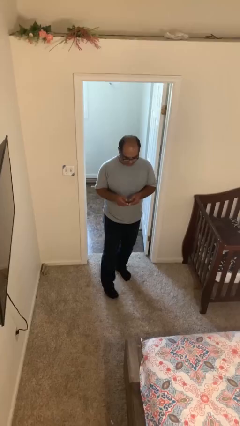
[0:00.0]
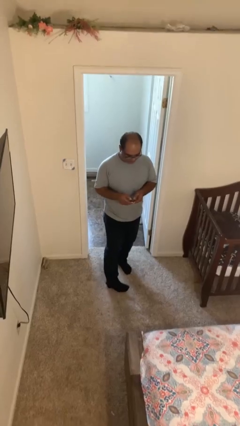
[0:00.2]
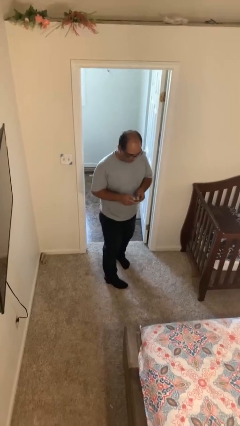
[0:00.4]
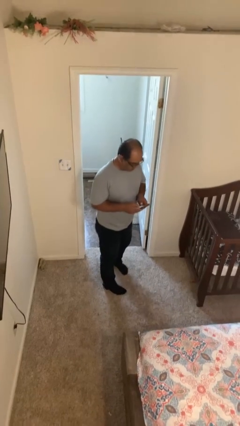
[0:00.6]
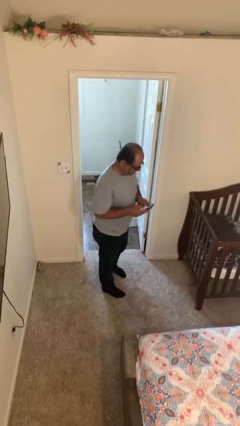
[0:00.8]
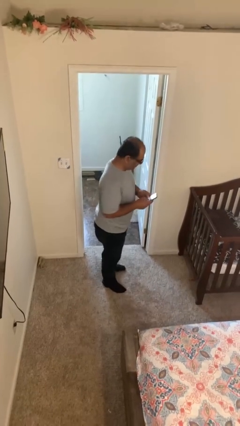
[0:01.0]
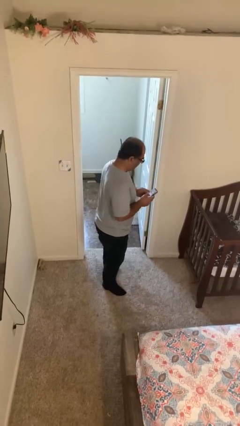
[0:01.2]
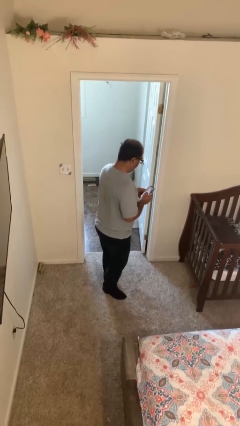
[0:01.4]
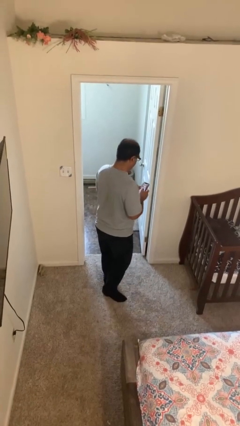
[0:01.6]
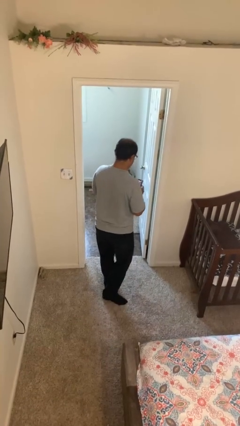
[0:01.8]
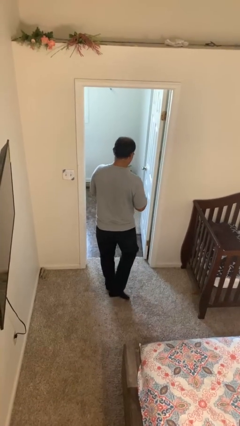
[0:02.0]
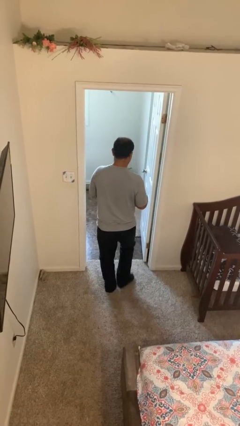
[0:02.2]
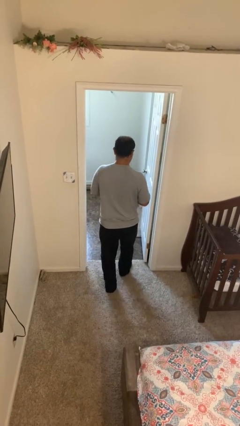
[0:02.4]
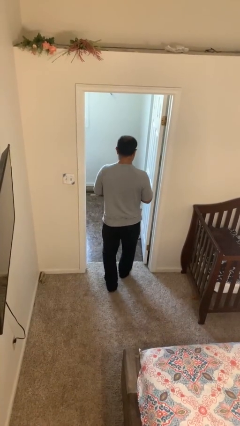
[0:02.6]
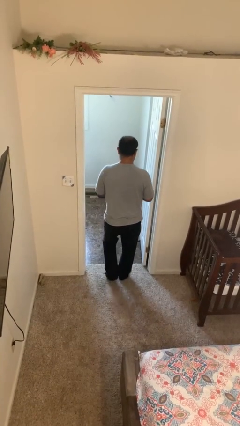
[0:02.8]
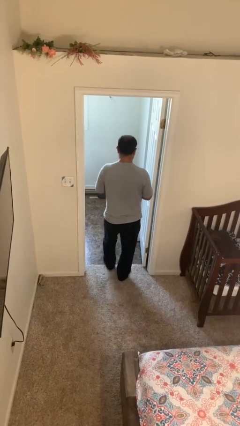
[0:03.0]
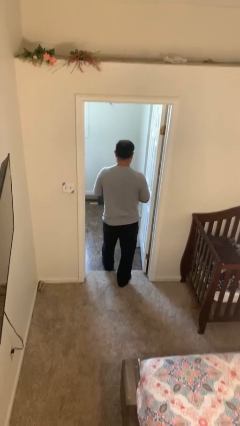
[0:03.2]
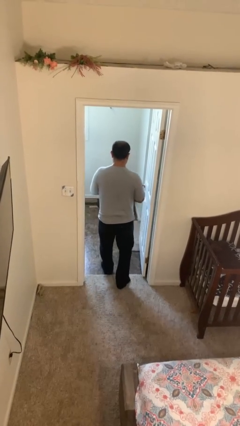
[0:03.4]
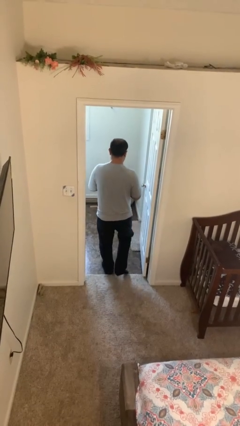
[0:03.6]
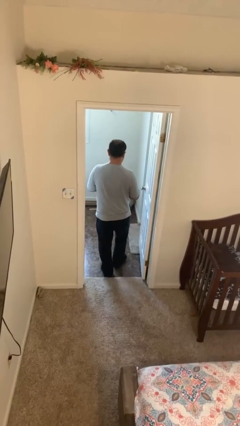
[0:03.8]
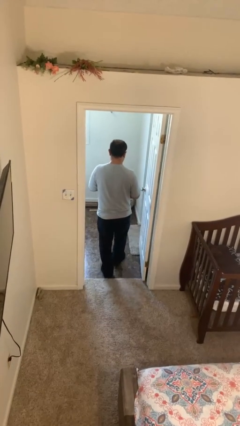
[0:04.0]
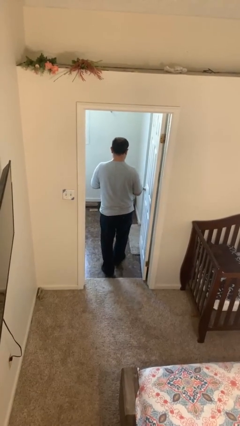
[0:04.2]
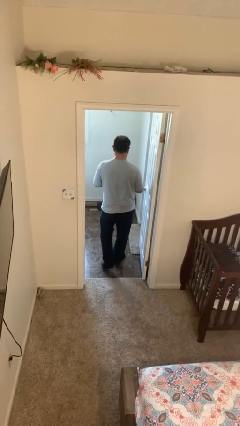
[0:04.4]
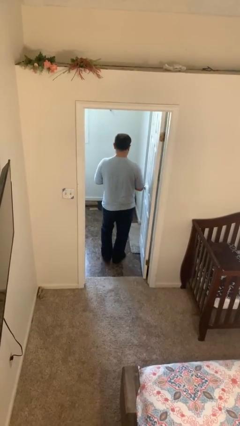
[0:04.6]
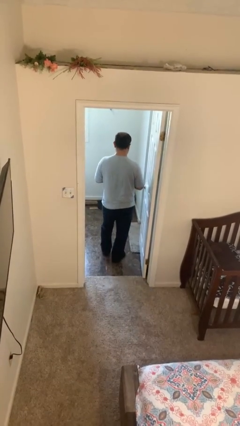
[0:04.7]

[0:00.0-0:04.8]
person exits scene through structure

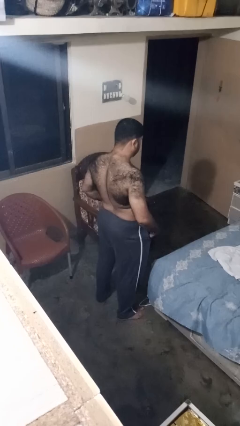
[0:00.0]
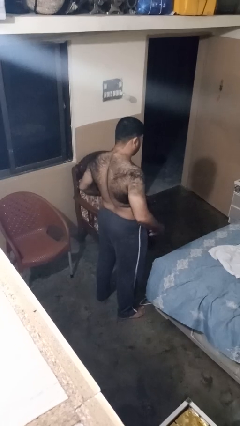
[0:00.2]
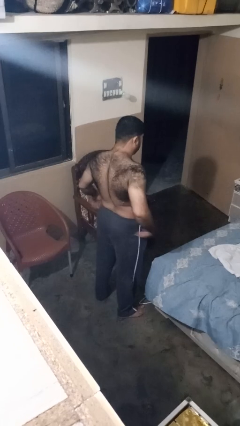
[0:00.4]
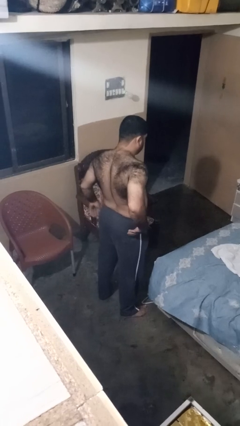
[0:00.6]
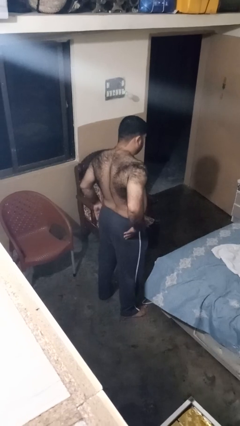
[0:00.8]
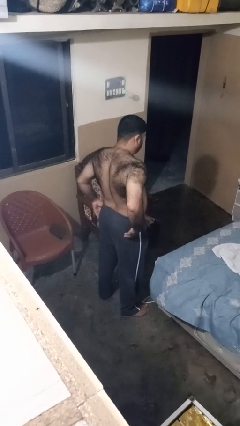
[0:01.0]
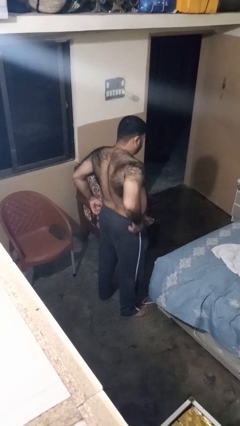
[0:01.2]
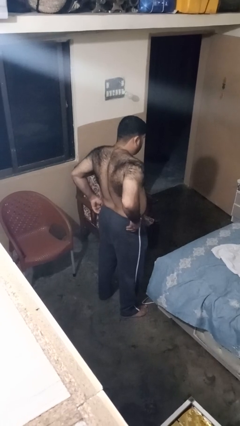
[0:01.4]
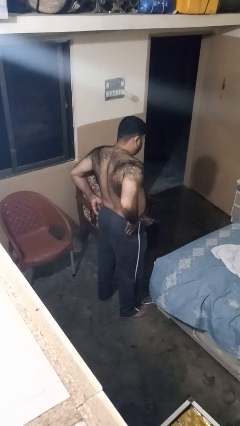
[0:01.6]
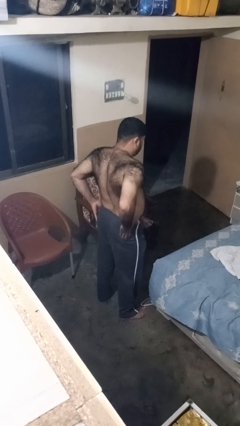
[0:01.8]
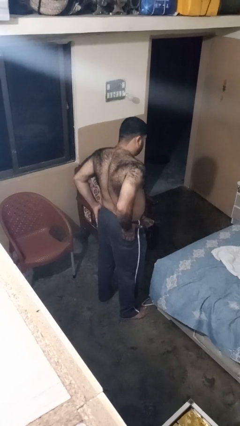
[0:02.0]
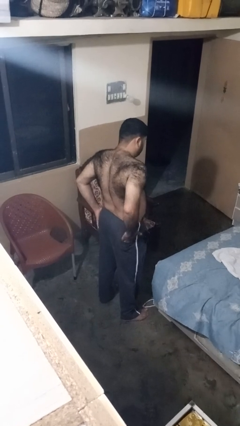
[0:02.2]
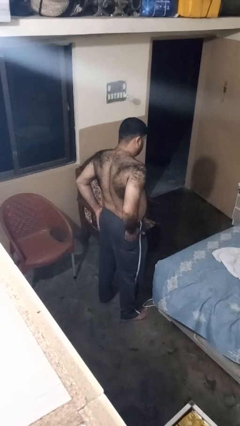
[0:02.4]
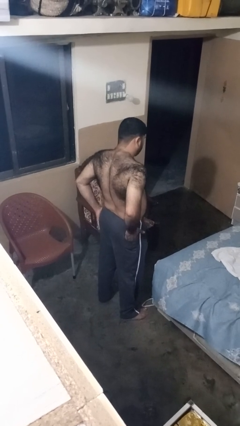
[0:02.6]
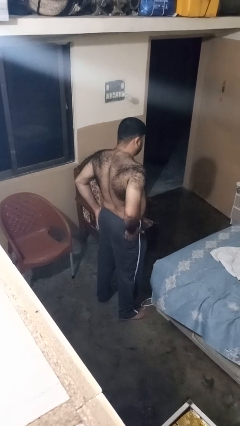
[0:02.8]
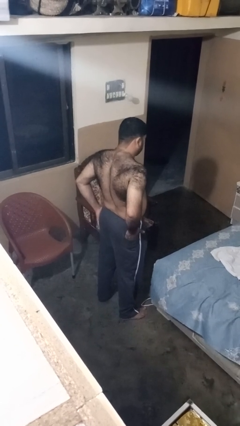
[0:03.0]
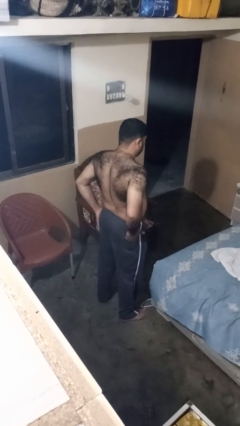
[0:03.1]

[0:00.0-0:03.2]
person puts hands in back pockets

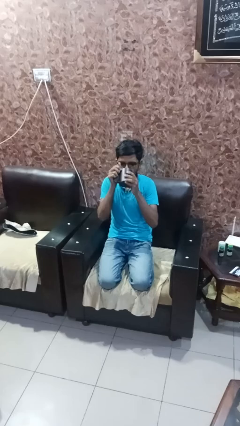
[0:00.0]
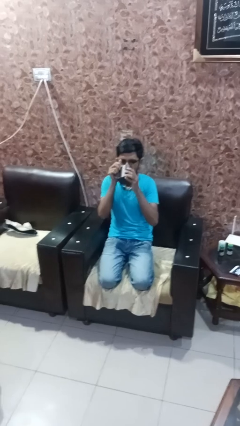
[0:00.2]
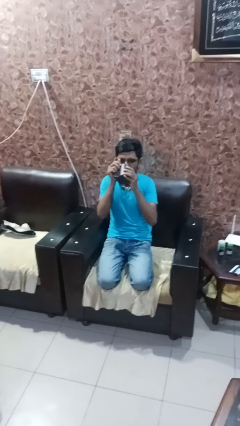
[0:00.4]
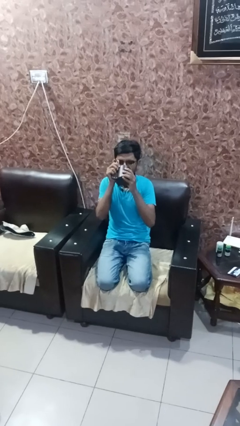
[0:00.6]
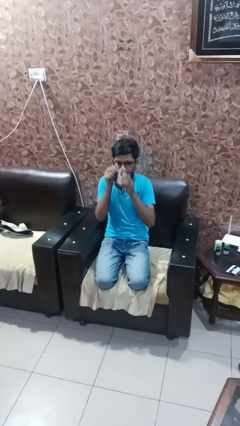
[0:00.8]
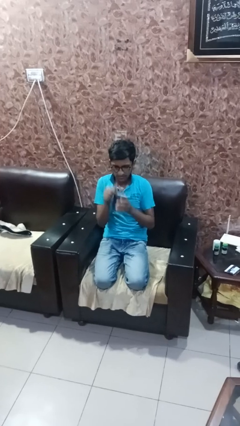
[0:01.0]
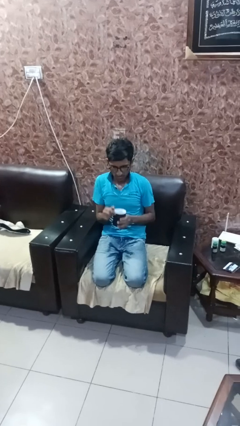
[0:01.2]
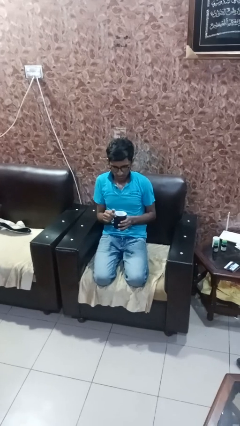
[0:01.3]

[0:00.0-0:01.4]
person drinks from mug

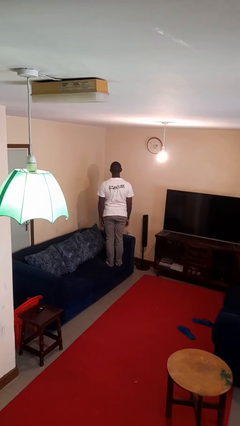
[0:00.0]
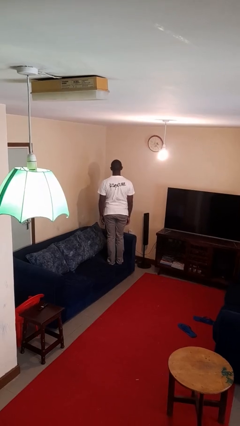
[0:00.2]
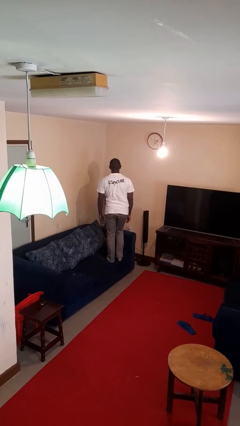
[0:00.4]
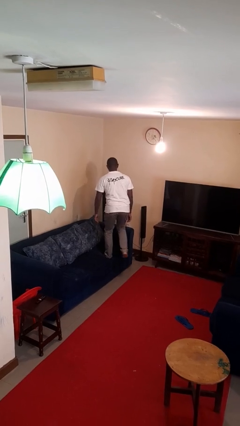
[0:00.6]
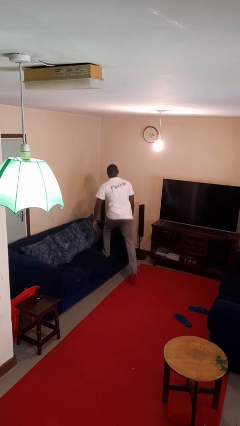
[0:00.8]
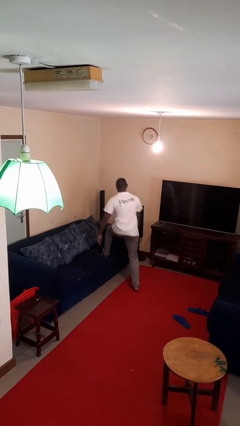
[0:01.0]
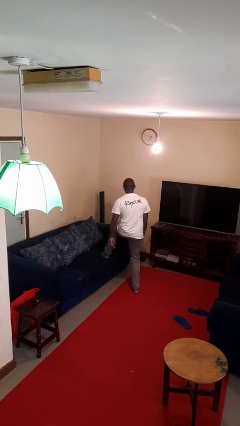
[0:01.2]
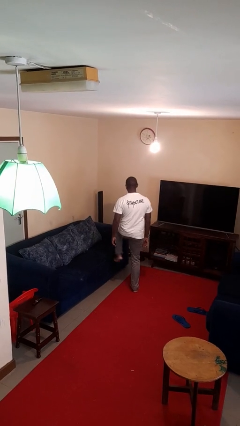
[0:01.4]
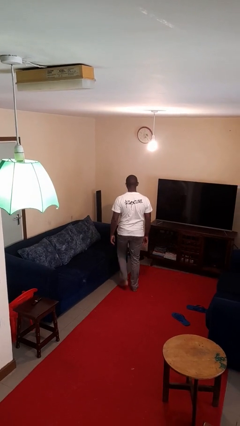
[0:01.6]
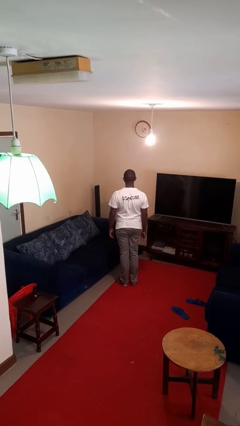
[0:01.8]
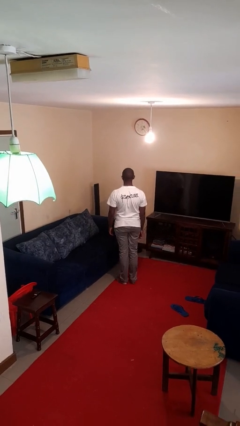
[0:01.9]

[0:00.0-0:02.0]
person climbs off couch

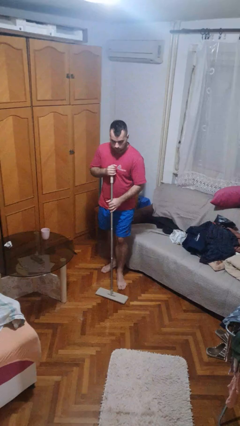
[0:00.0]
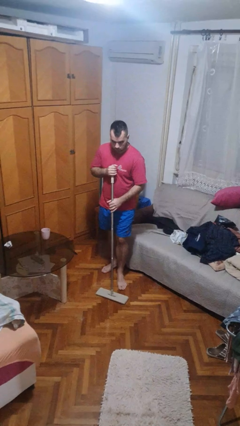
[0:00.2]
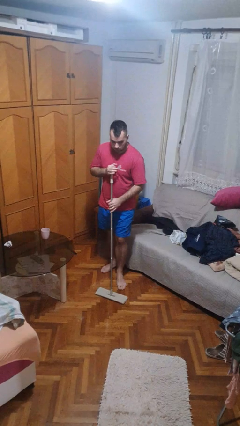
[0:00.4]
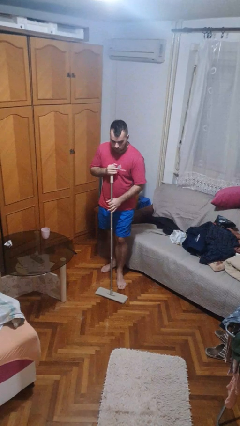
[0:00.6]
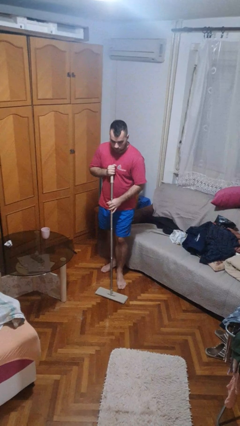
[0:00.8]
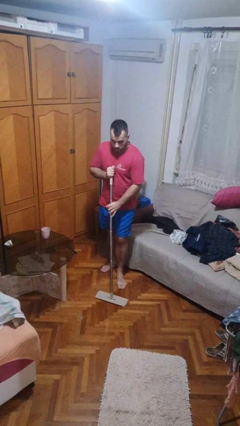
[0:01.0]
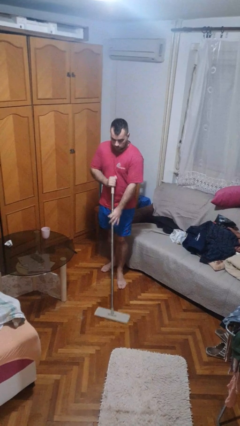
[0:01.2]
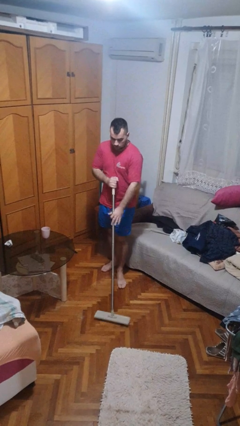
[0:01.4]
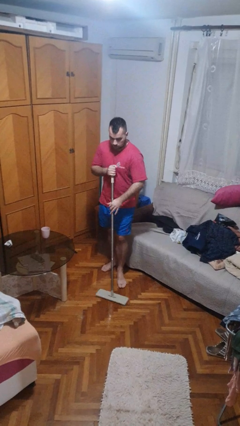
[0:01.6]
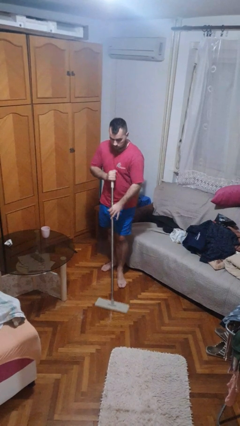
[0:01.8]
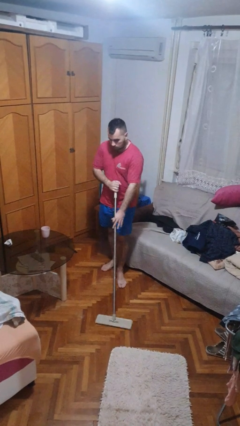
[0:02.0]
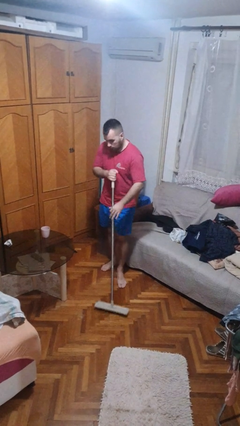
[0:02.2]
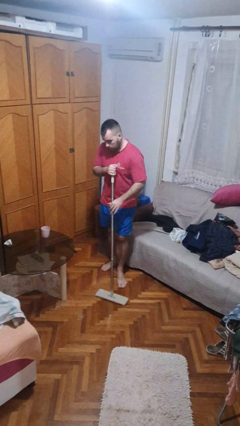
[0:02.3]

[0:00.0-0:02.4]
person mops

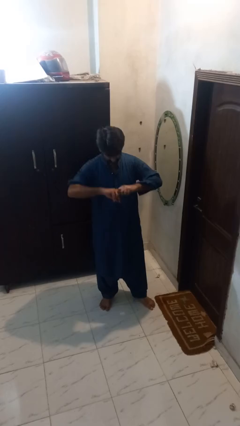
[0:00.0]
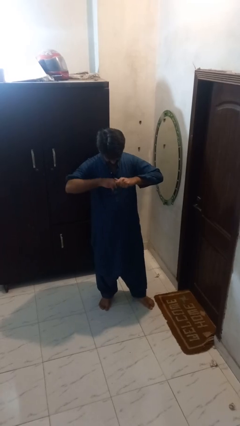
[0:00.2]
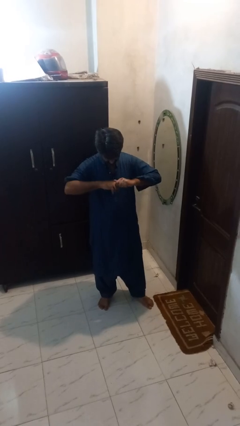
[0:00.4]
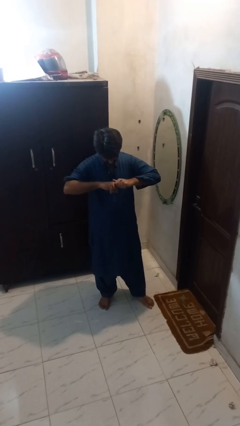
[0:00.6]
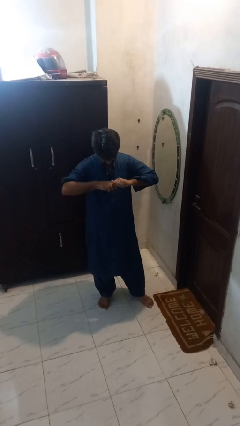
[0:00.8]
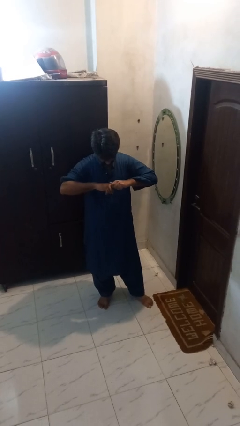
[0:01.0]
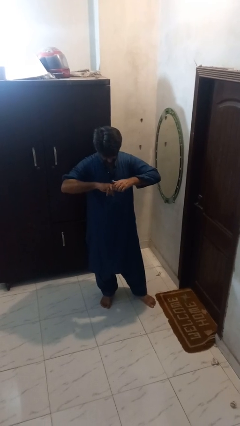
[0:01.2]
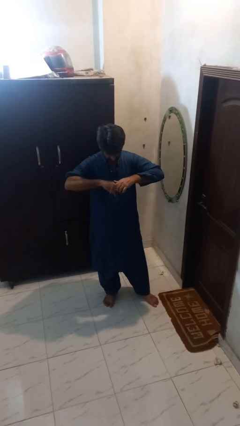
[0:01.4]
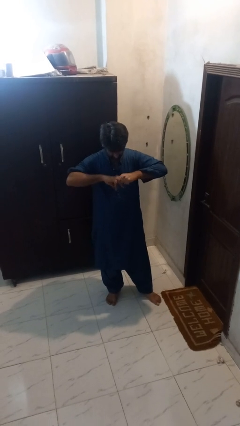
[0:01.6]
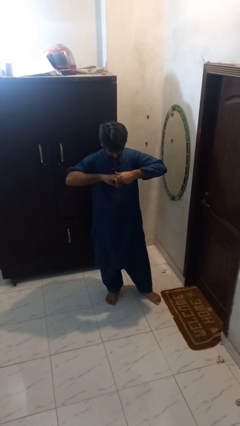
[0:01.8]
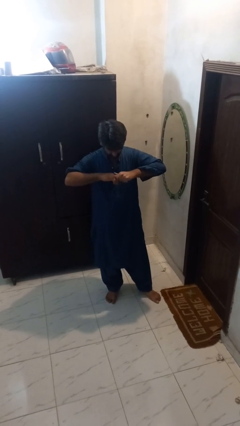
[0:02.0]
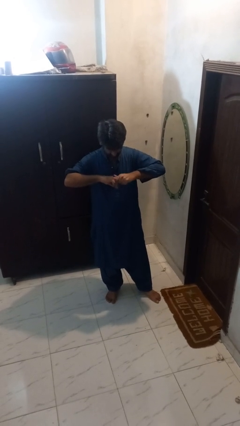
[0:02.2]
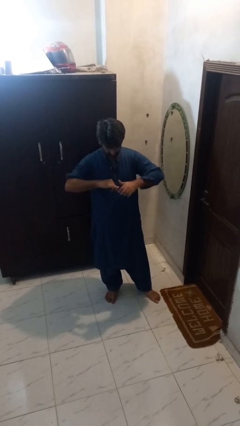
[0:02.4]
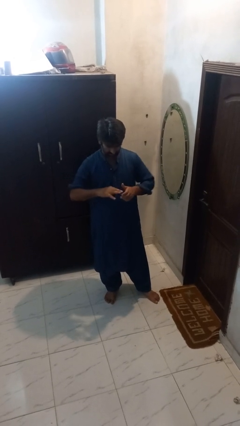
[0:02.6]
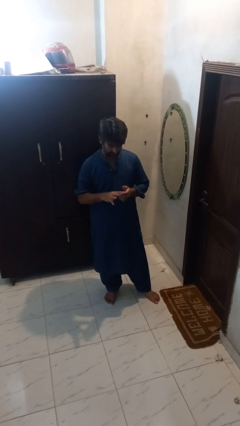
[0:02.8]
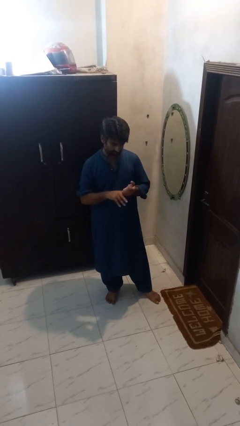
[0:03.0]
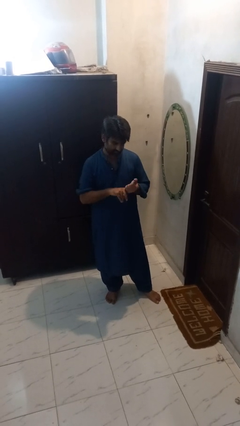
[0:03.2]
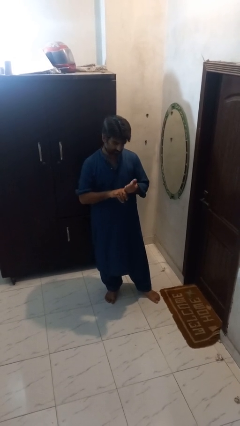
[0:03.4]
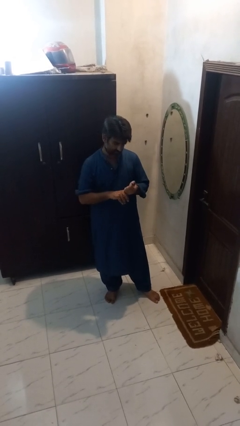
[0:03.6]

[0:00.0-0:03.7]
person cracks knuckles
